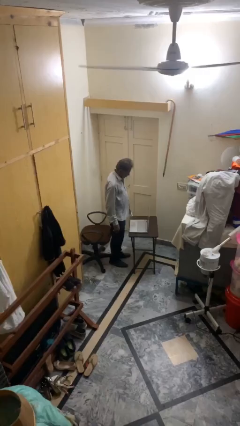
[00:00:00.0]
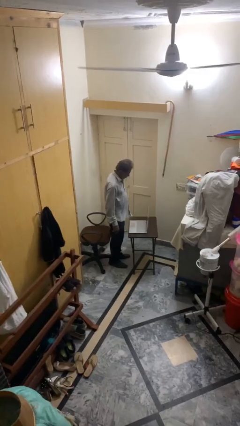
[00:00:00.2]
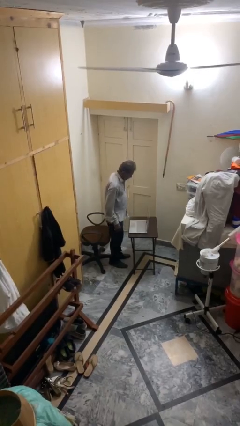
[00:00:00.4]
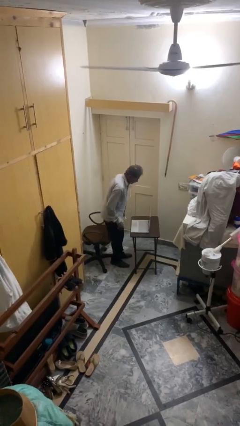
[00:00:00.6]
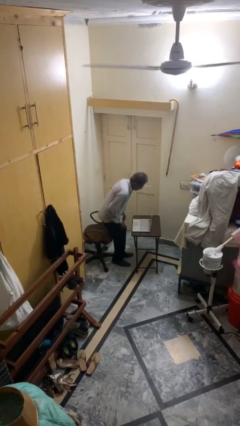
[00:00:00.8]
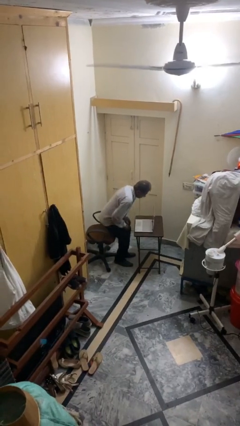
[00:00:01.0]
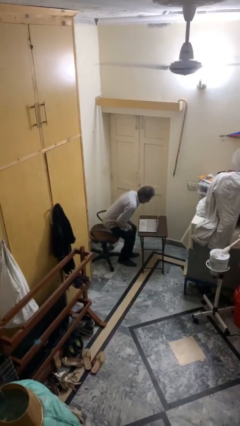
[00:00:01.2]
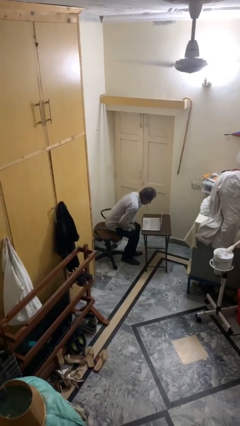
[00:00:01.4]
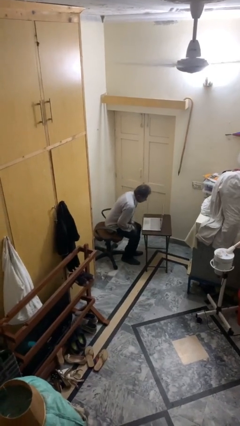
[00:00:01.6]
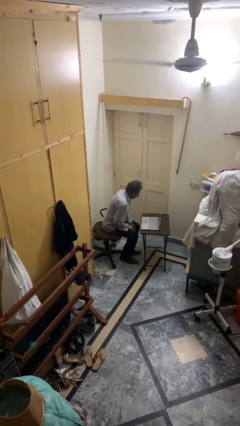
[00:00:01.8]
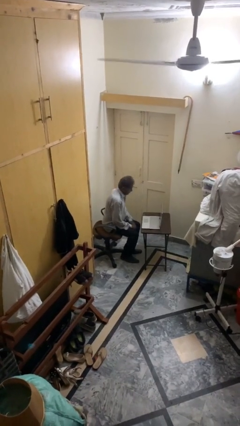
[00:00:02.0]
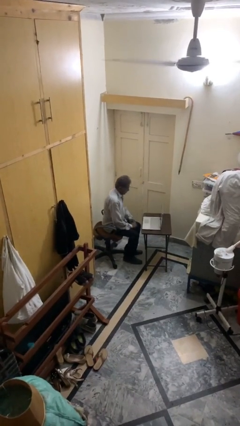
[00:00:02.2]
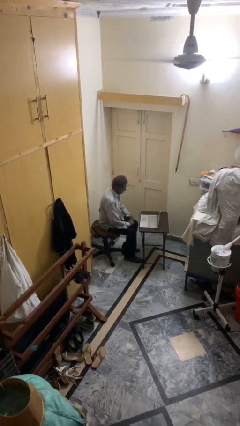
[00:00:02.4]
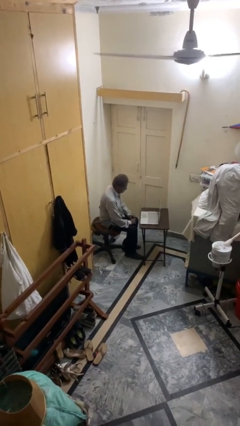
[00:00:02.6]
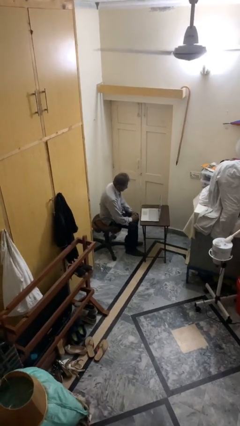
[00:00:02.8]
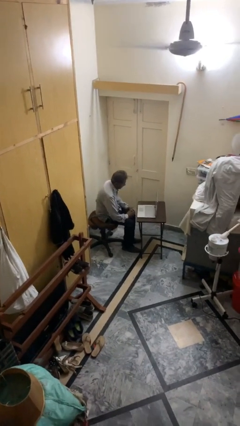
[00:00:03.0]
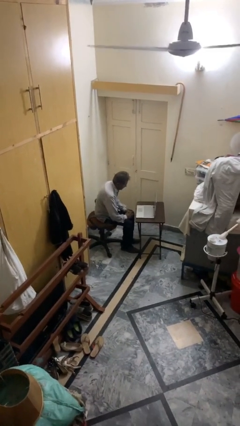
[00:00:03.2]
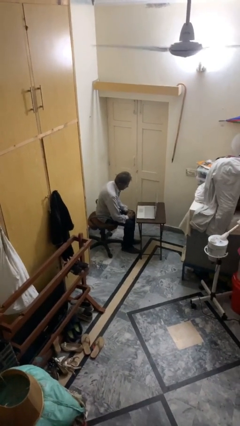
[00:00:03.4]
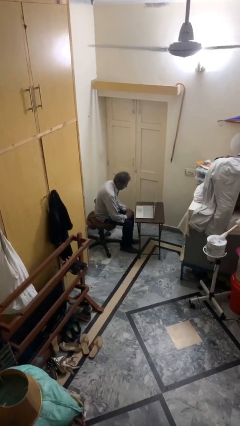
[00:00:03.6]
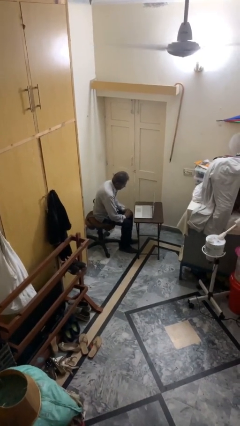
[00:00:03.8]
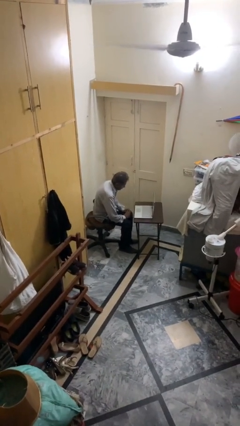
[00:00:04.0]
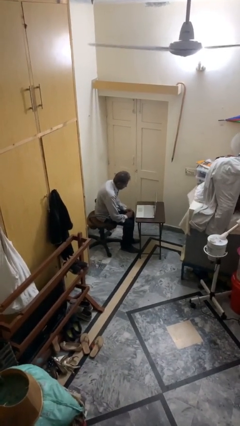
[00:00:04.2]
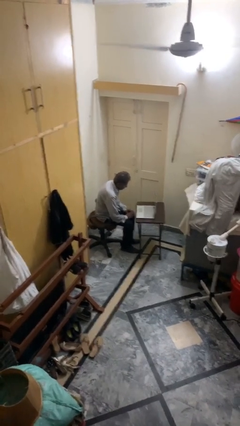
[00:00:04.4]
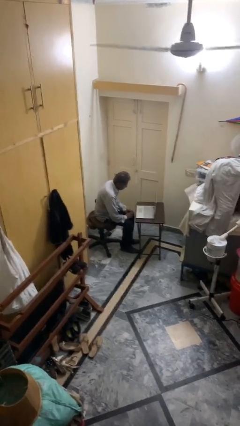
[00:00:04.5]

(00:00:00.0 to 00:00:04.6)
person sits down

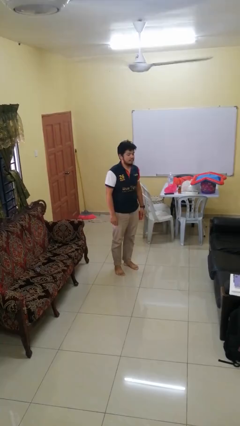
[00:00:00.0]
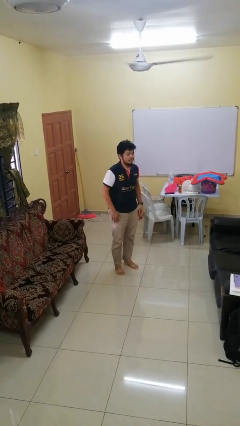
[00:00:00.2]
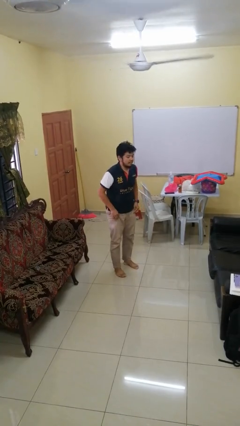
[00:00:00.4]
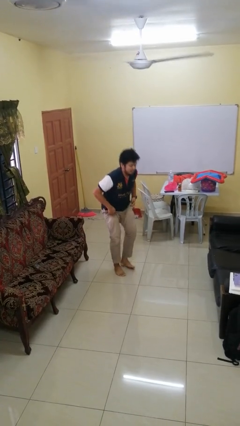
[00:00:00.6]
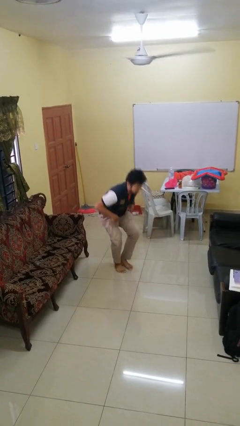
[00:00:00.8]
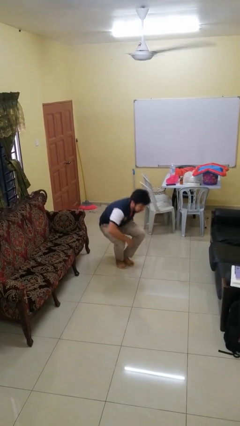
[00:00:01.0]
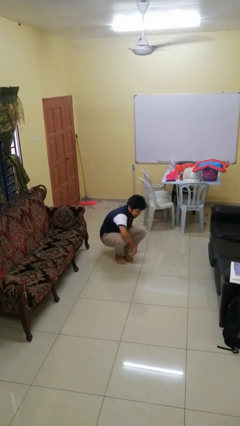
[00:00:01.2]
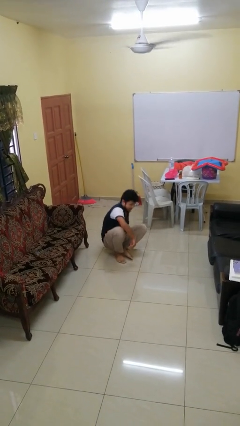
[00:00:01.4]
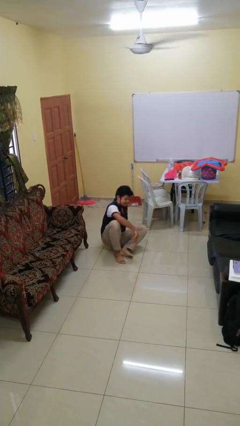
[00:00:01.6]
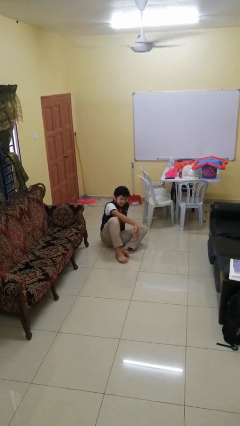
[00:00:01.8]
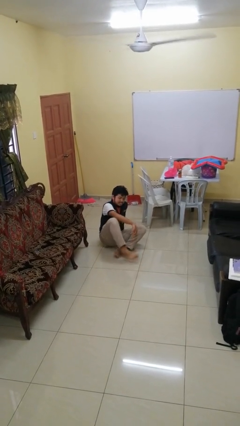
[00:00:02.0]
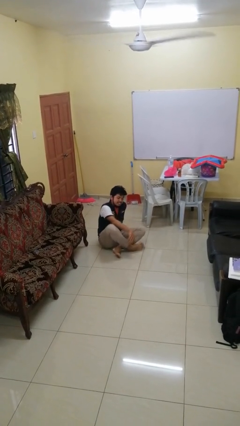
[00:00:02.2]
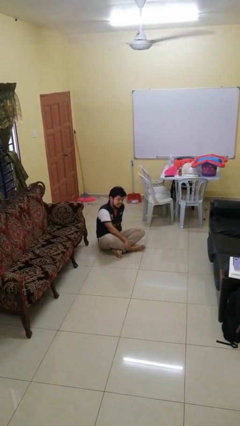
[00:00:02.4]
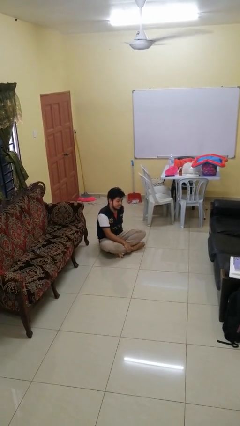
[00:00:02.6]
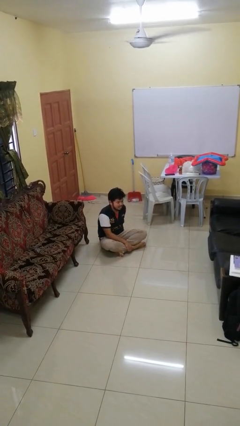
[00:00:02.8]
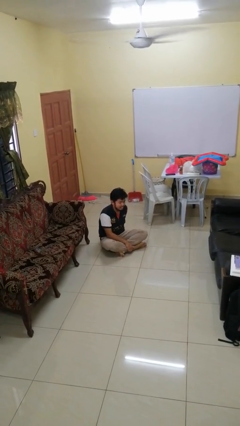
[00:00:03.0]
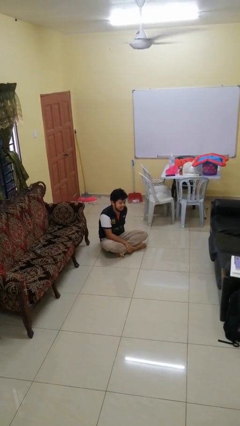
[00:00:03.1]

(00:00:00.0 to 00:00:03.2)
person sits crisscross

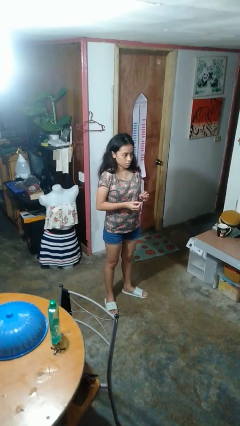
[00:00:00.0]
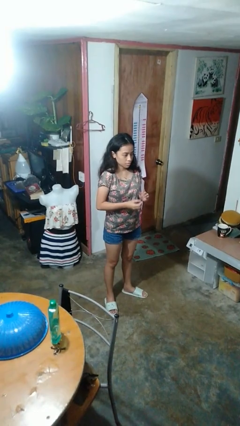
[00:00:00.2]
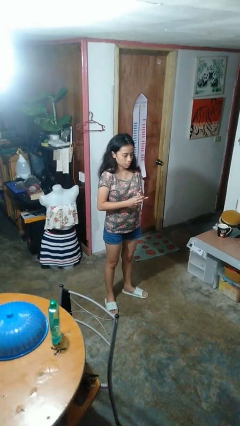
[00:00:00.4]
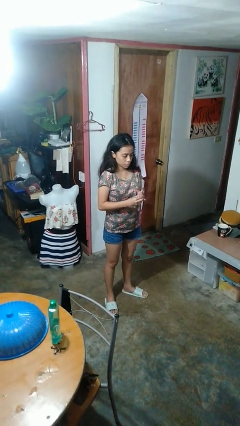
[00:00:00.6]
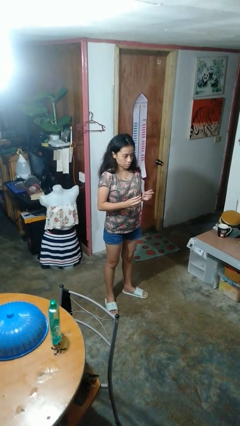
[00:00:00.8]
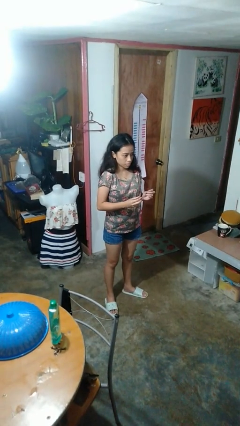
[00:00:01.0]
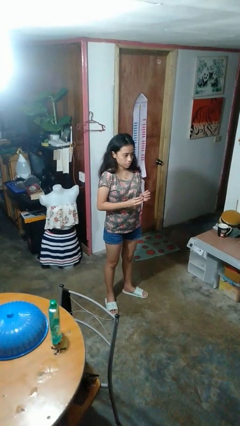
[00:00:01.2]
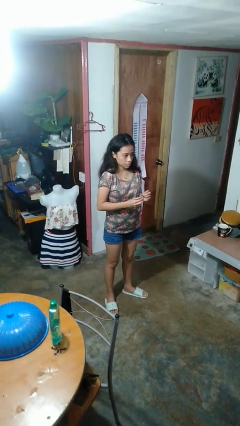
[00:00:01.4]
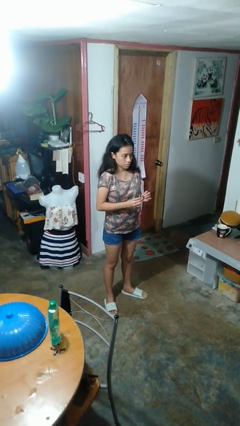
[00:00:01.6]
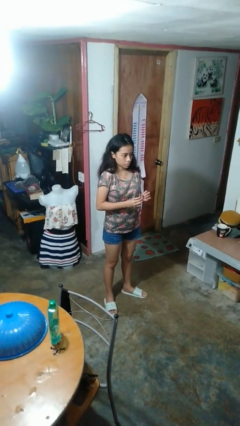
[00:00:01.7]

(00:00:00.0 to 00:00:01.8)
person takes off ring

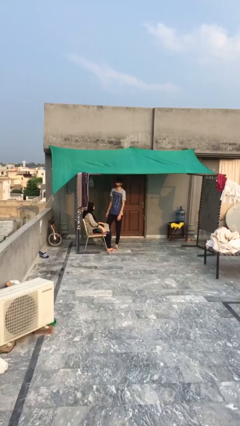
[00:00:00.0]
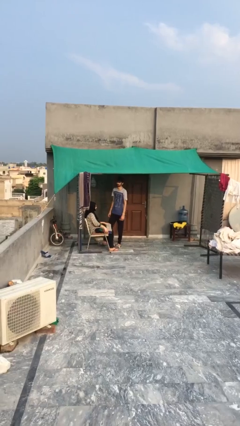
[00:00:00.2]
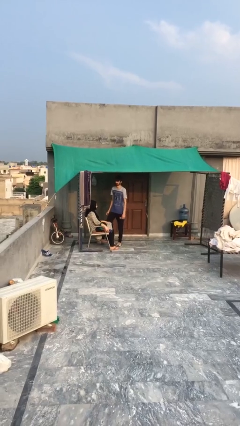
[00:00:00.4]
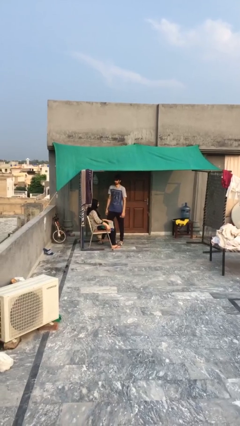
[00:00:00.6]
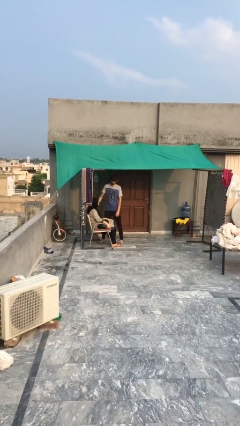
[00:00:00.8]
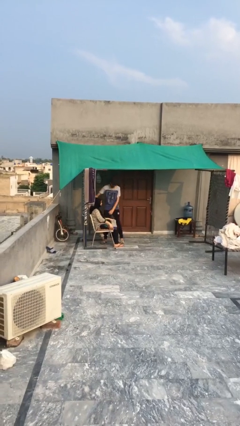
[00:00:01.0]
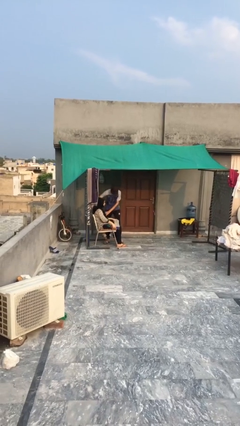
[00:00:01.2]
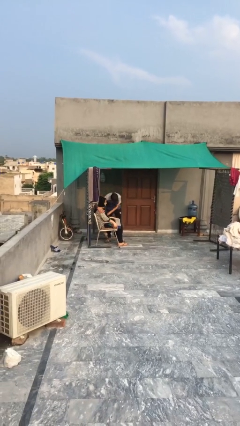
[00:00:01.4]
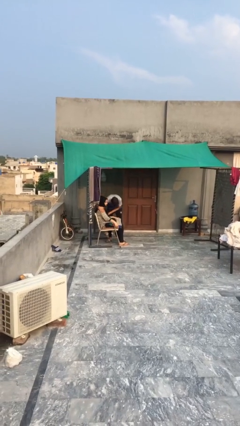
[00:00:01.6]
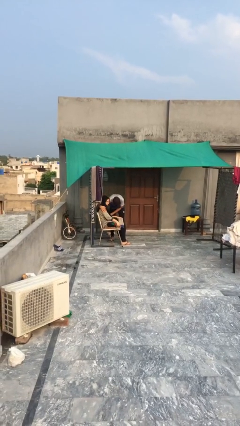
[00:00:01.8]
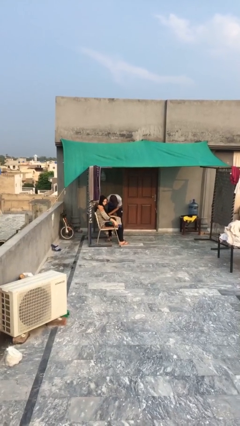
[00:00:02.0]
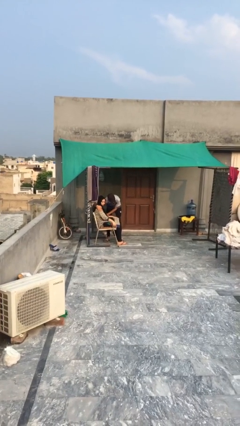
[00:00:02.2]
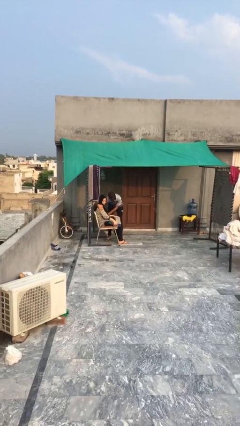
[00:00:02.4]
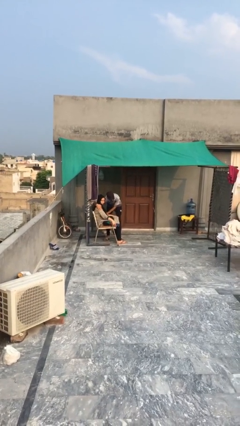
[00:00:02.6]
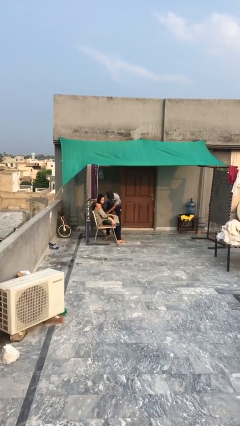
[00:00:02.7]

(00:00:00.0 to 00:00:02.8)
person embraces person

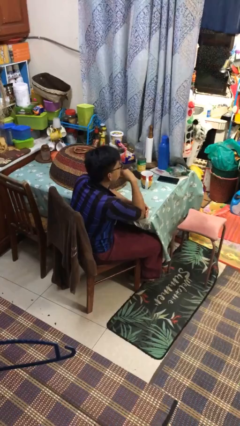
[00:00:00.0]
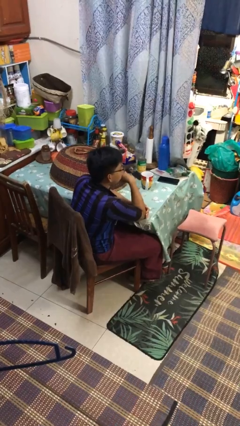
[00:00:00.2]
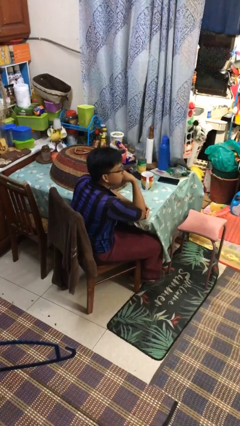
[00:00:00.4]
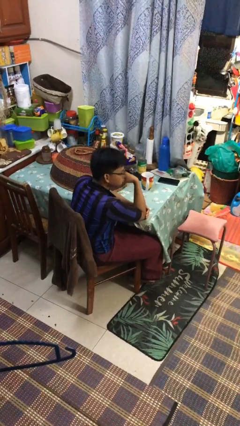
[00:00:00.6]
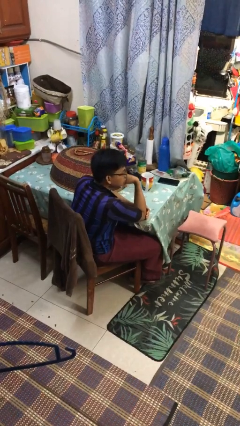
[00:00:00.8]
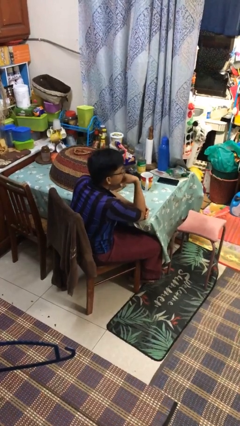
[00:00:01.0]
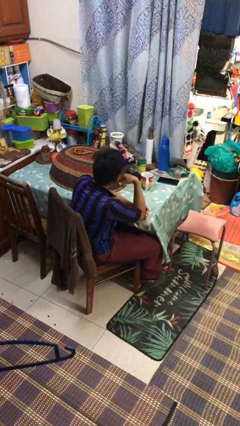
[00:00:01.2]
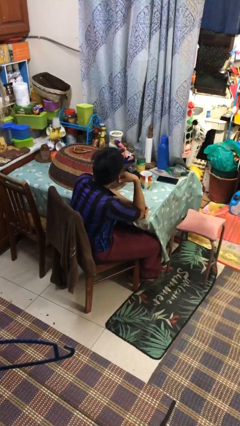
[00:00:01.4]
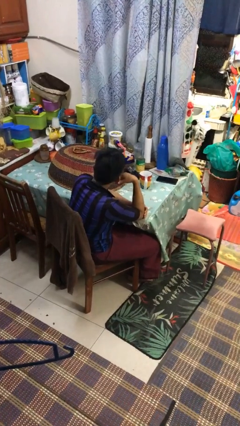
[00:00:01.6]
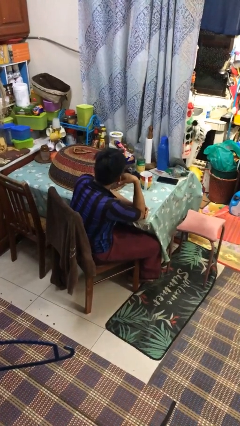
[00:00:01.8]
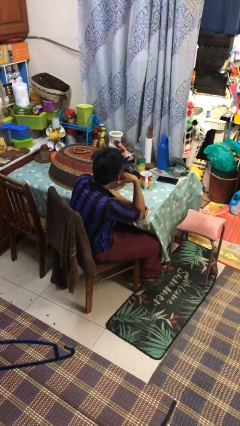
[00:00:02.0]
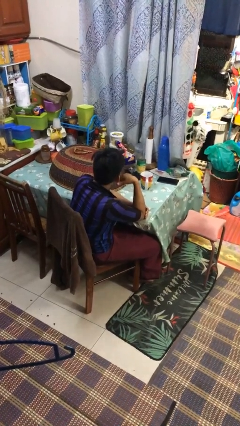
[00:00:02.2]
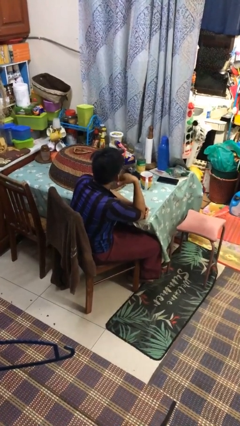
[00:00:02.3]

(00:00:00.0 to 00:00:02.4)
person nods head

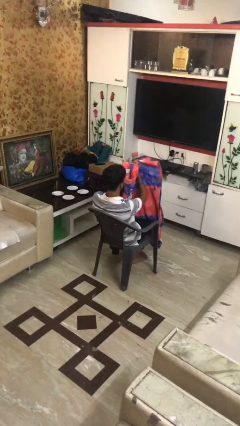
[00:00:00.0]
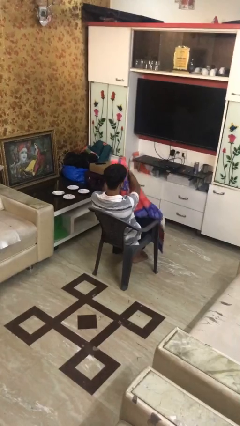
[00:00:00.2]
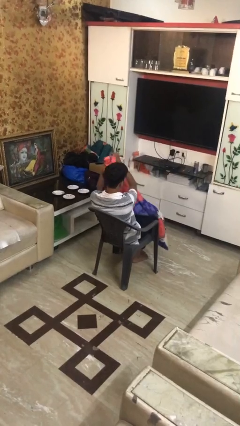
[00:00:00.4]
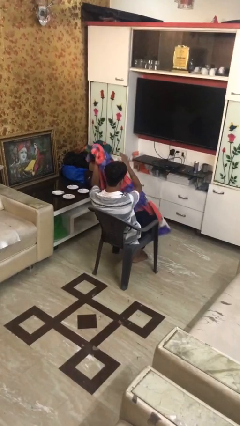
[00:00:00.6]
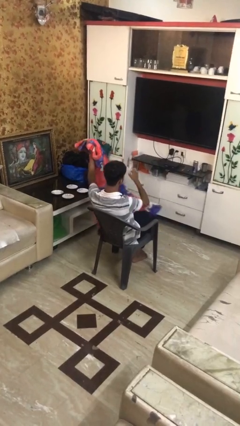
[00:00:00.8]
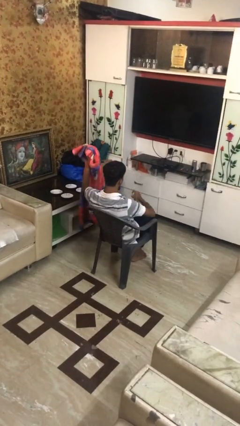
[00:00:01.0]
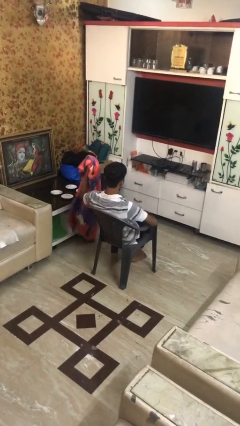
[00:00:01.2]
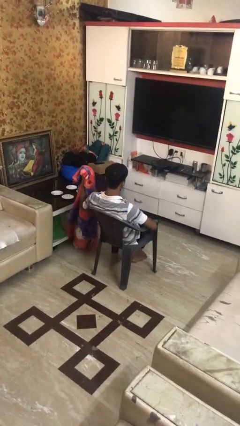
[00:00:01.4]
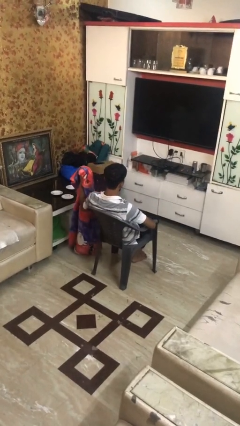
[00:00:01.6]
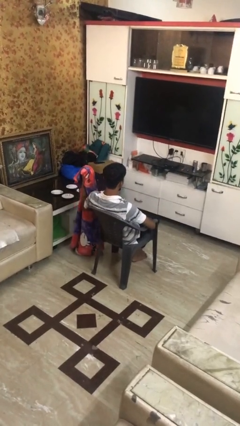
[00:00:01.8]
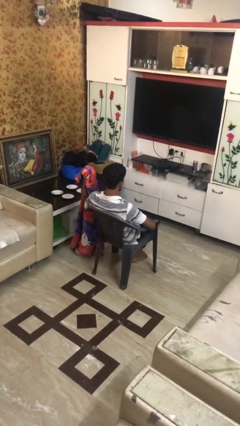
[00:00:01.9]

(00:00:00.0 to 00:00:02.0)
person uncovers with blanket

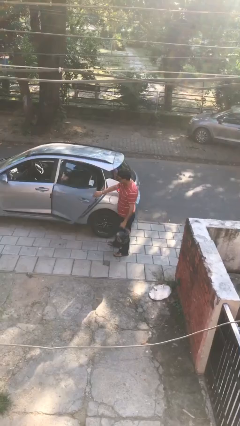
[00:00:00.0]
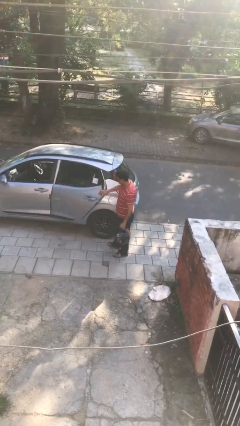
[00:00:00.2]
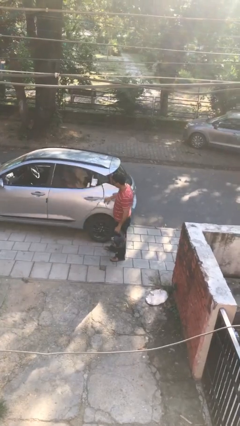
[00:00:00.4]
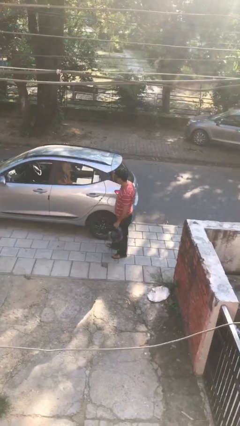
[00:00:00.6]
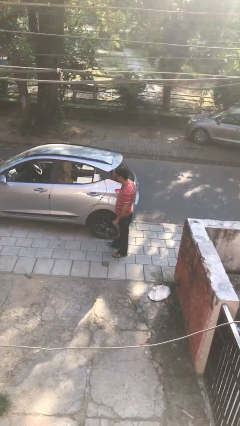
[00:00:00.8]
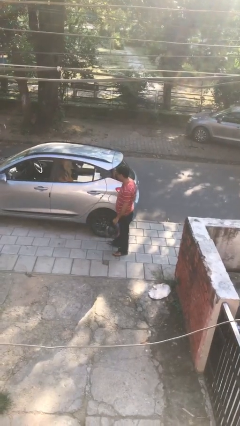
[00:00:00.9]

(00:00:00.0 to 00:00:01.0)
person closes car door
